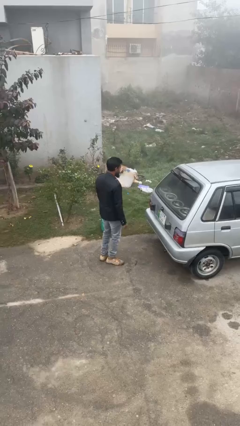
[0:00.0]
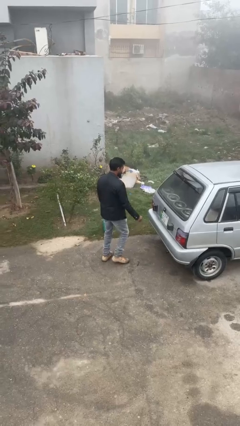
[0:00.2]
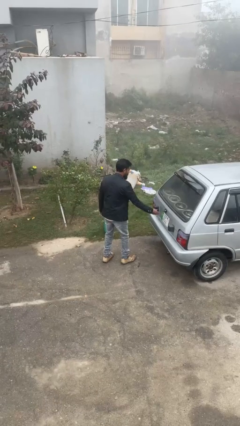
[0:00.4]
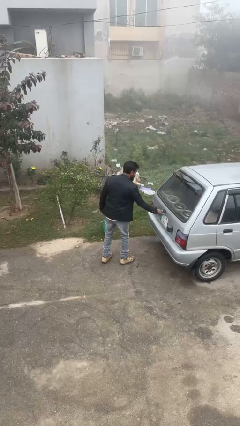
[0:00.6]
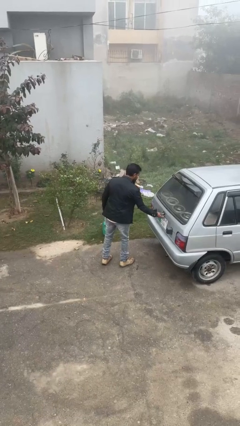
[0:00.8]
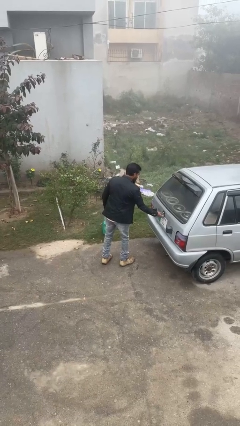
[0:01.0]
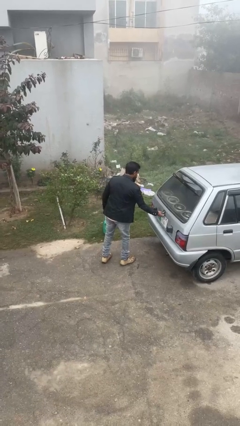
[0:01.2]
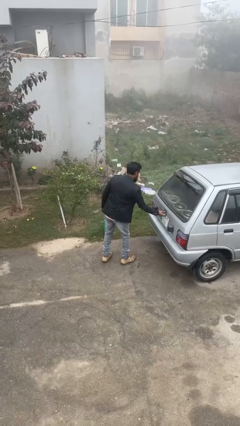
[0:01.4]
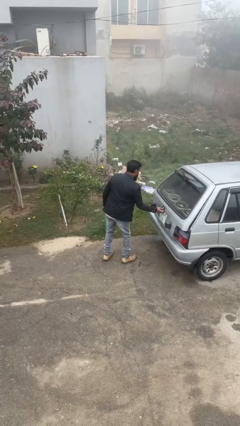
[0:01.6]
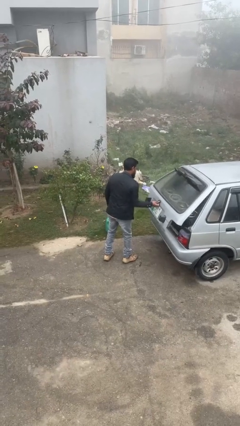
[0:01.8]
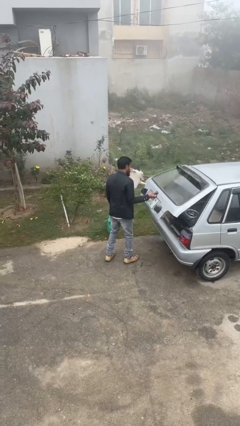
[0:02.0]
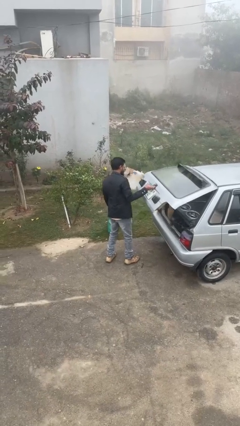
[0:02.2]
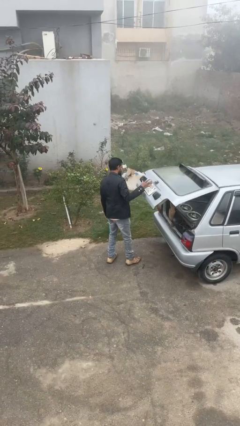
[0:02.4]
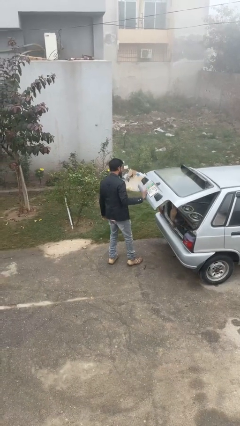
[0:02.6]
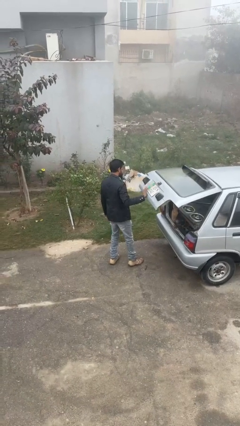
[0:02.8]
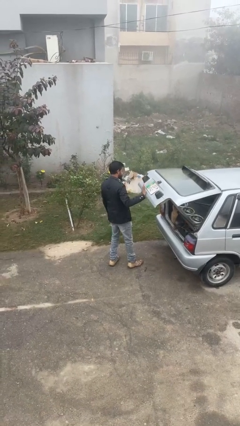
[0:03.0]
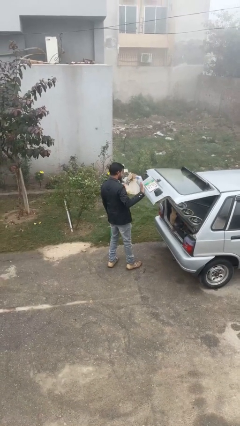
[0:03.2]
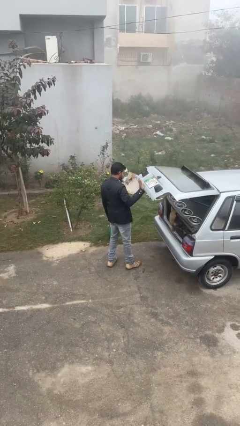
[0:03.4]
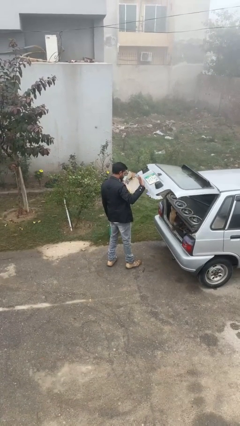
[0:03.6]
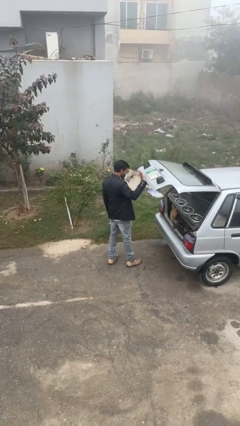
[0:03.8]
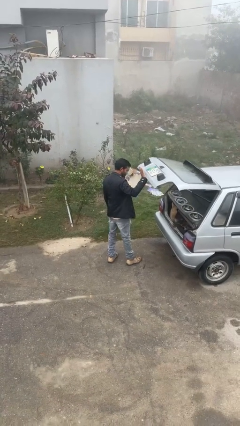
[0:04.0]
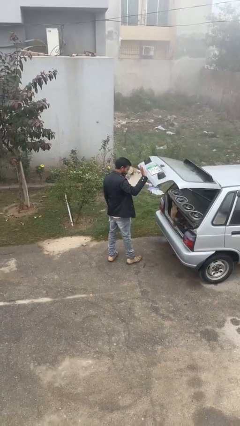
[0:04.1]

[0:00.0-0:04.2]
person opens car trunk

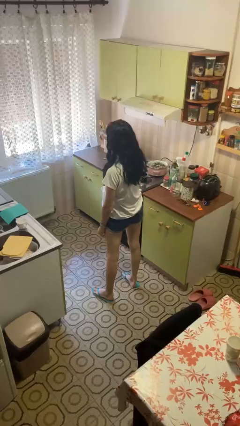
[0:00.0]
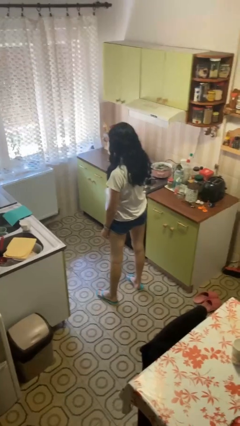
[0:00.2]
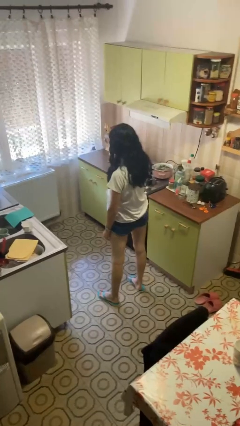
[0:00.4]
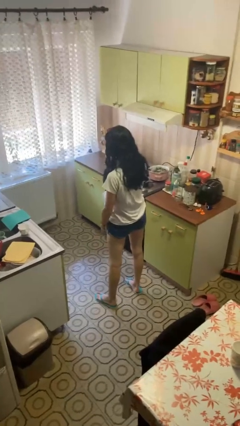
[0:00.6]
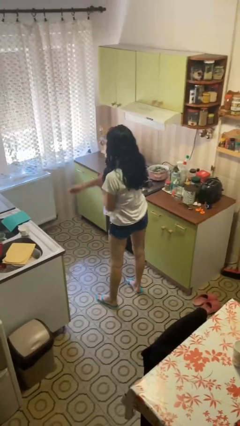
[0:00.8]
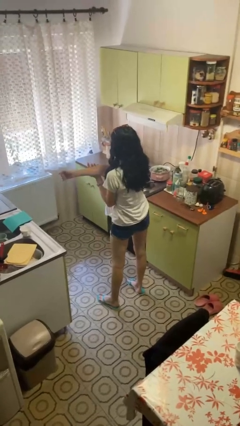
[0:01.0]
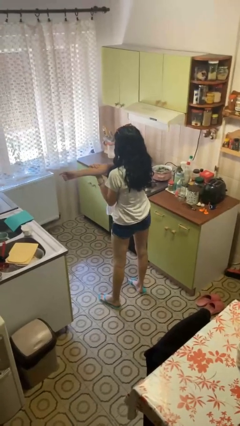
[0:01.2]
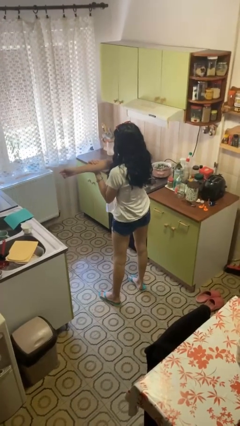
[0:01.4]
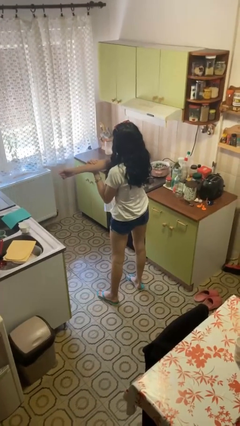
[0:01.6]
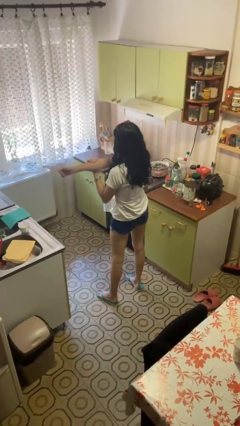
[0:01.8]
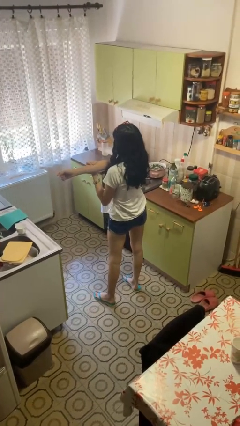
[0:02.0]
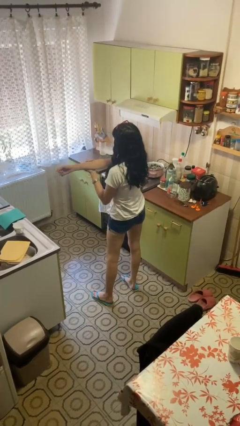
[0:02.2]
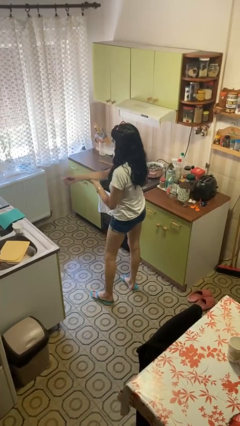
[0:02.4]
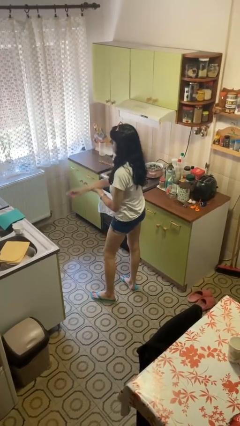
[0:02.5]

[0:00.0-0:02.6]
person stretches arms to side

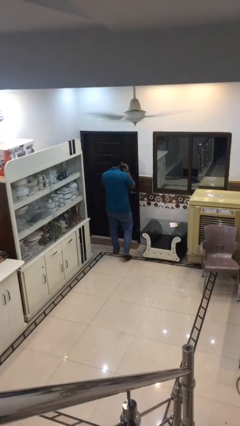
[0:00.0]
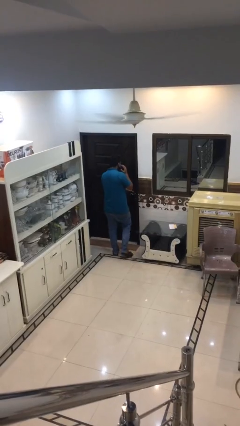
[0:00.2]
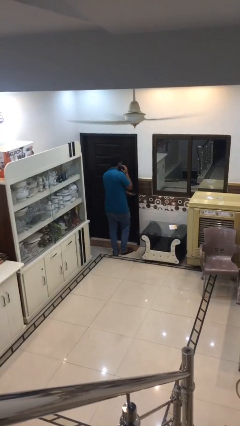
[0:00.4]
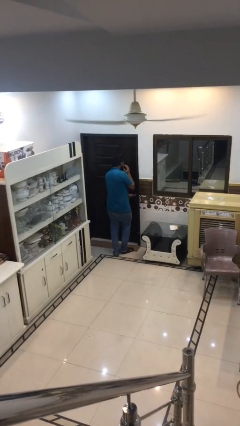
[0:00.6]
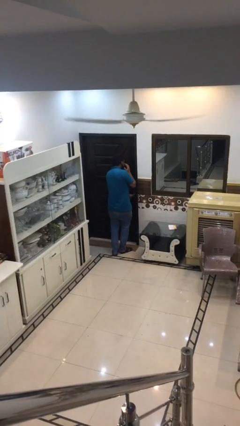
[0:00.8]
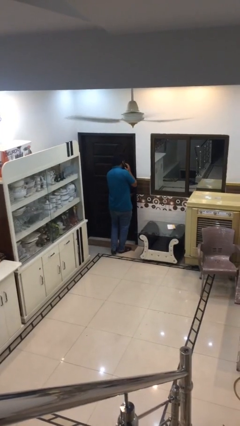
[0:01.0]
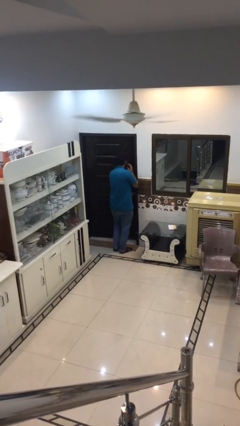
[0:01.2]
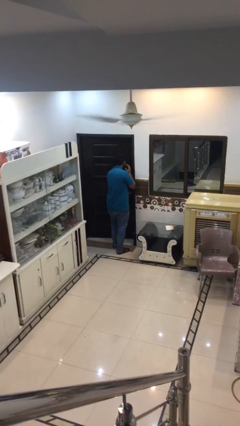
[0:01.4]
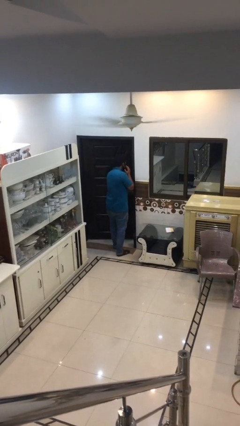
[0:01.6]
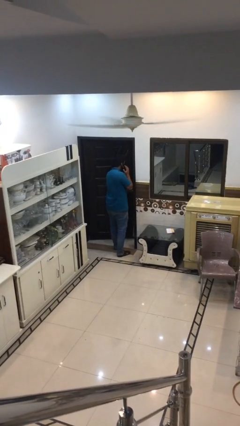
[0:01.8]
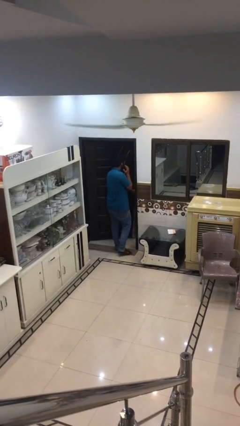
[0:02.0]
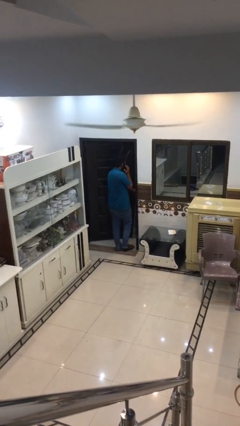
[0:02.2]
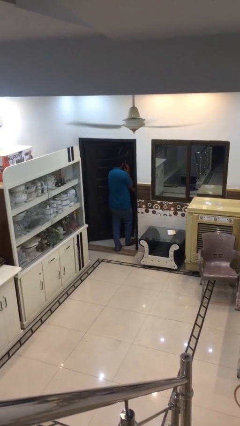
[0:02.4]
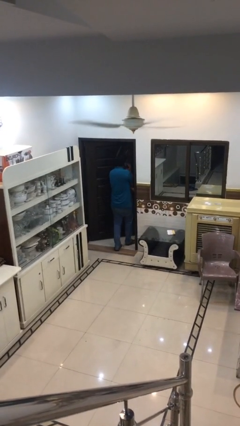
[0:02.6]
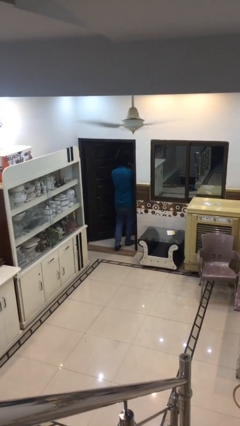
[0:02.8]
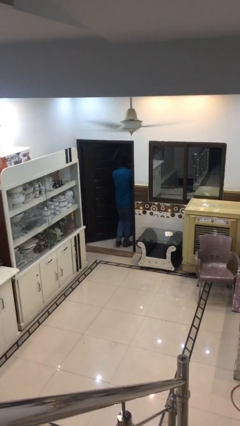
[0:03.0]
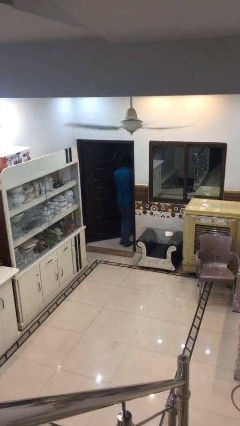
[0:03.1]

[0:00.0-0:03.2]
person opens facility door

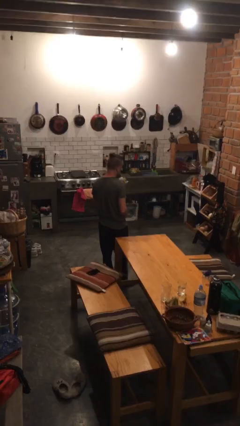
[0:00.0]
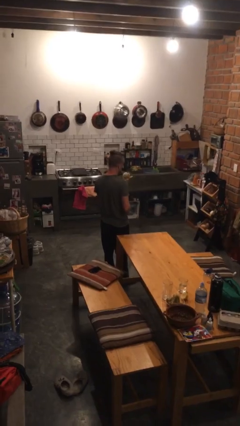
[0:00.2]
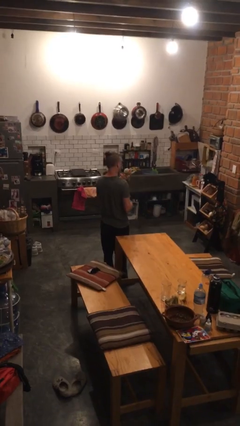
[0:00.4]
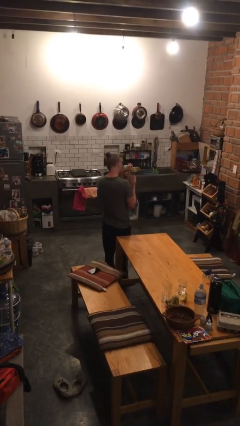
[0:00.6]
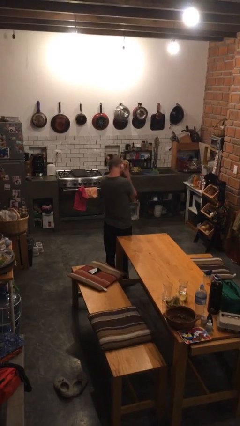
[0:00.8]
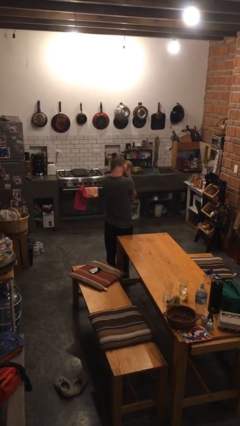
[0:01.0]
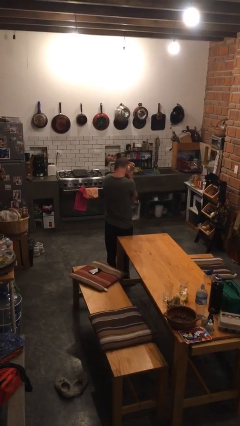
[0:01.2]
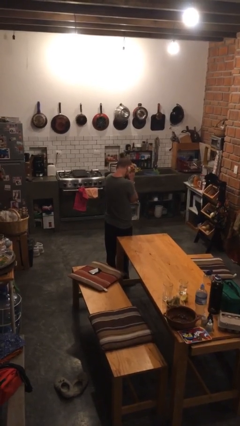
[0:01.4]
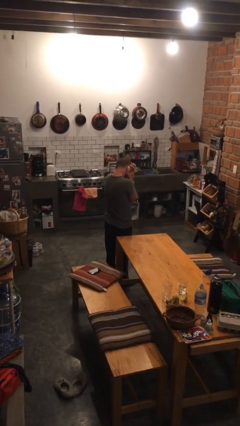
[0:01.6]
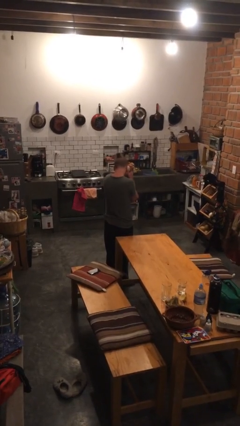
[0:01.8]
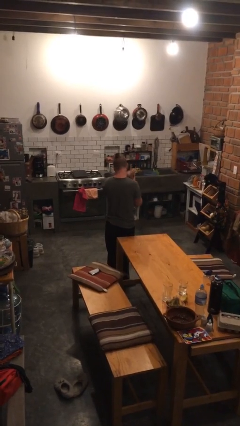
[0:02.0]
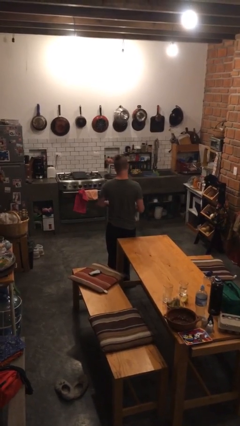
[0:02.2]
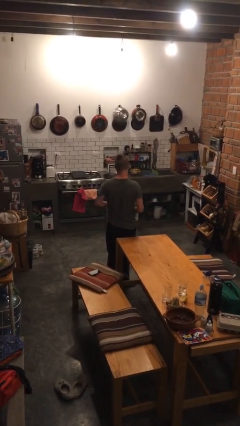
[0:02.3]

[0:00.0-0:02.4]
person hugs stuffed animal

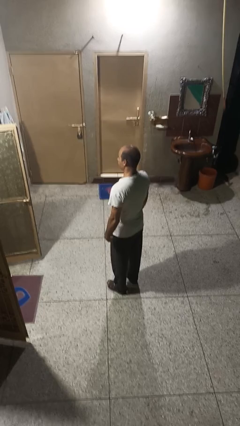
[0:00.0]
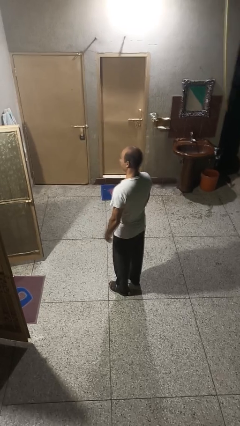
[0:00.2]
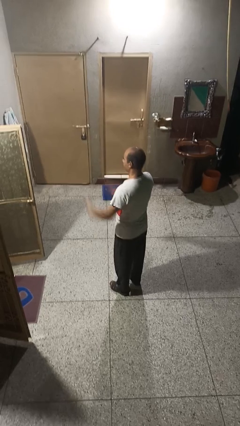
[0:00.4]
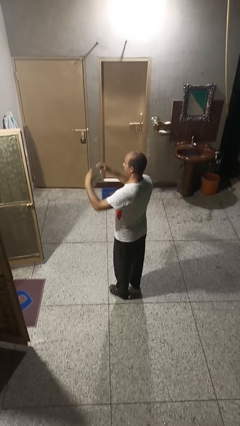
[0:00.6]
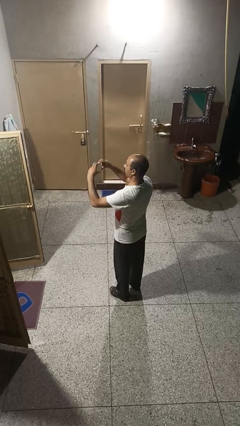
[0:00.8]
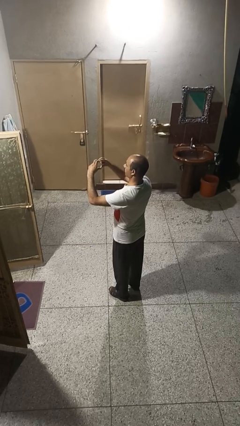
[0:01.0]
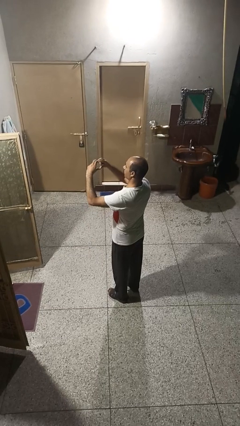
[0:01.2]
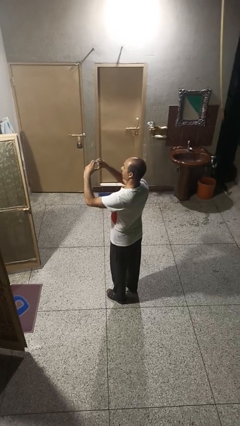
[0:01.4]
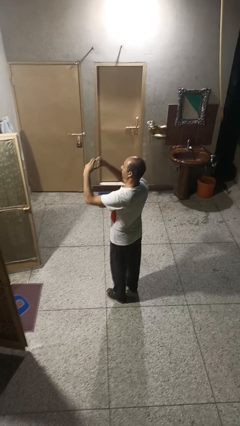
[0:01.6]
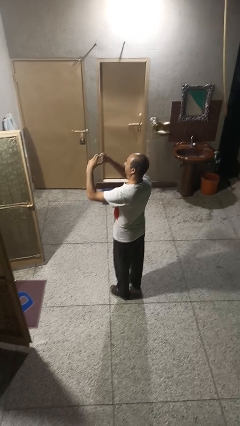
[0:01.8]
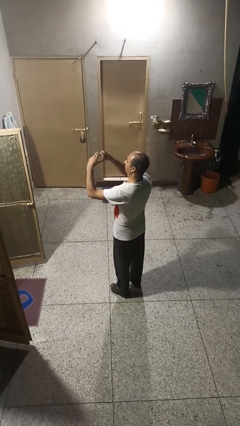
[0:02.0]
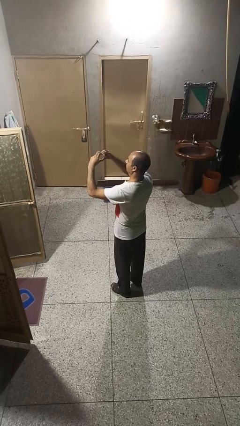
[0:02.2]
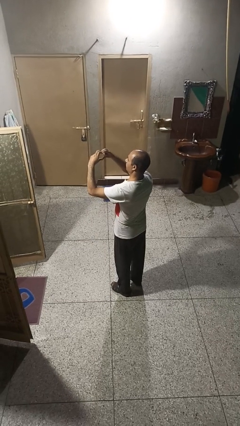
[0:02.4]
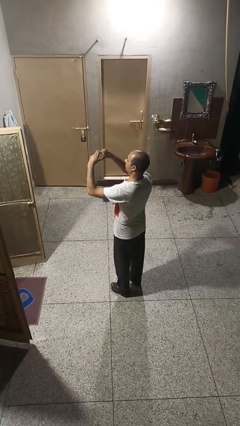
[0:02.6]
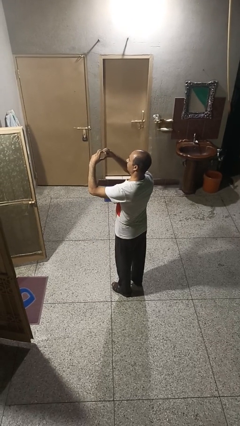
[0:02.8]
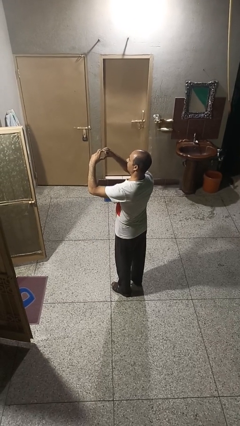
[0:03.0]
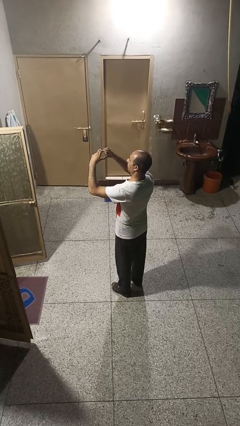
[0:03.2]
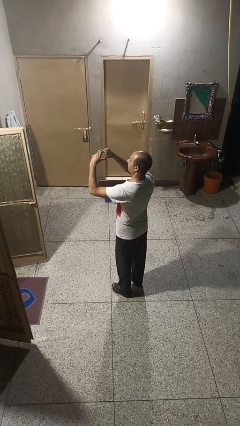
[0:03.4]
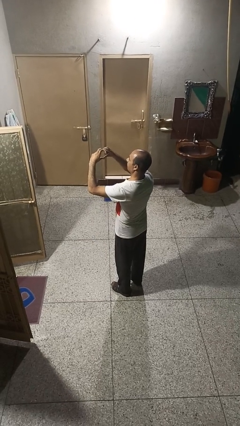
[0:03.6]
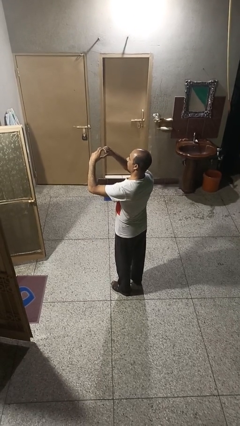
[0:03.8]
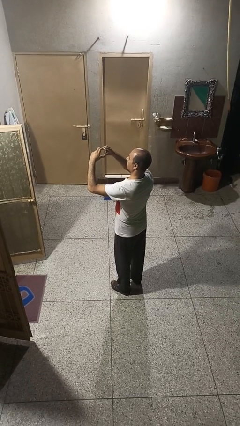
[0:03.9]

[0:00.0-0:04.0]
person gestures heart

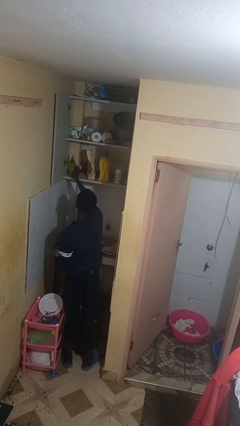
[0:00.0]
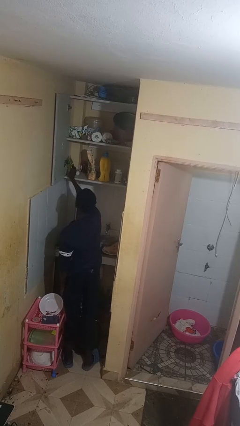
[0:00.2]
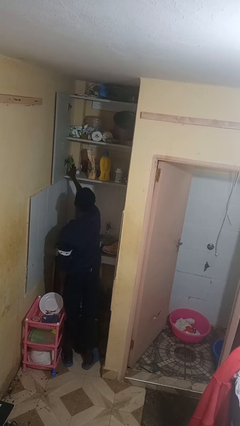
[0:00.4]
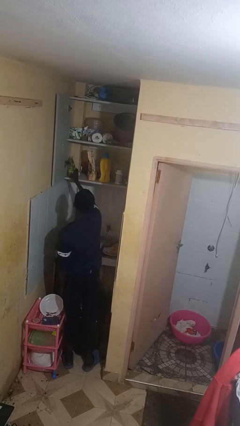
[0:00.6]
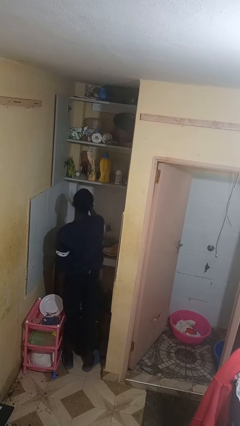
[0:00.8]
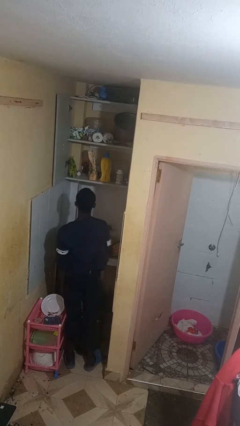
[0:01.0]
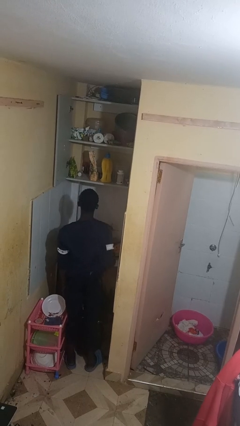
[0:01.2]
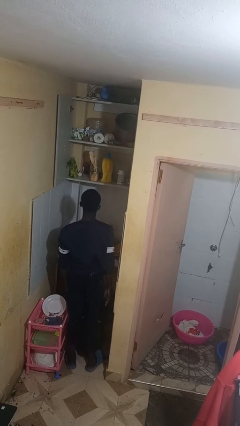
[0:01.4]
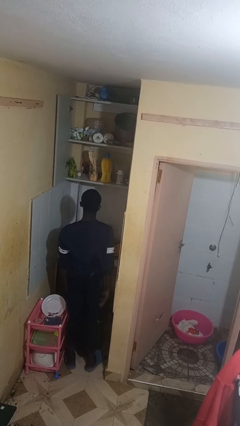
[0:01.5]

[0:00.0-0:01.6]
person puts object in cabinet
